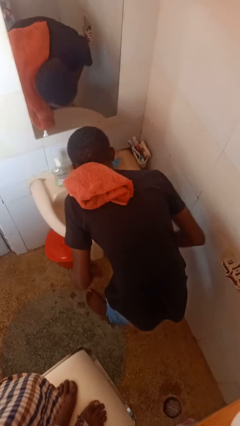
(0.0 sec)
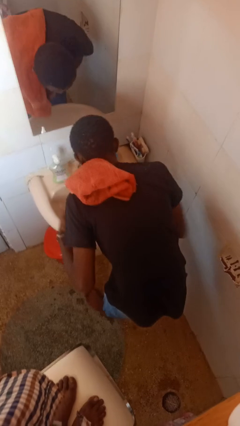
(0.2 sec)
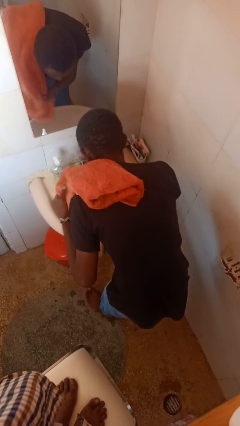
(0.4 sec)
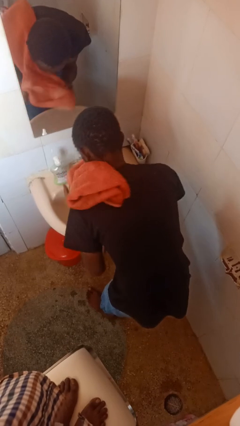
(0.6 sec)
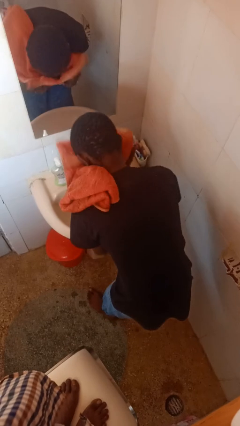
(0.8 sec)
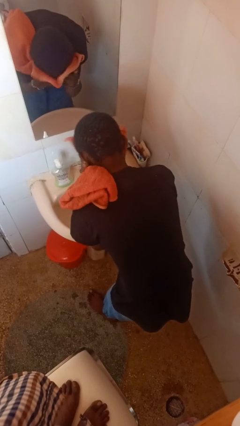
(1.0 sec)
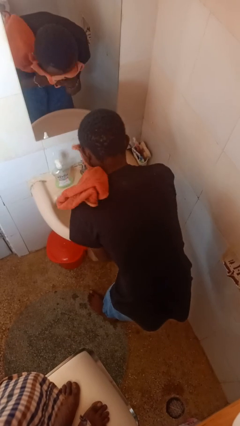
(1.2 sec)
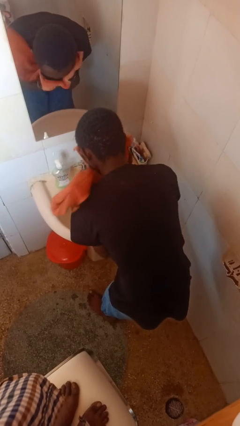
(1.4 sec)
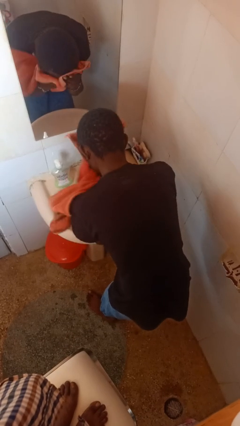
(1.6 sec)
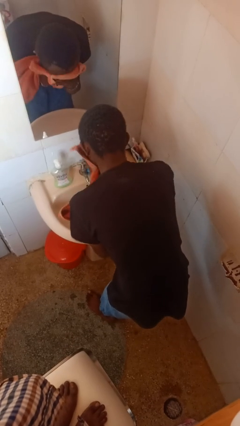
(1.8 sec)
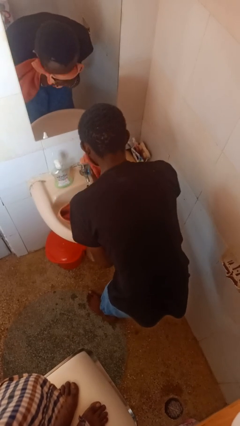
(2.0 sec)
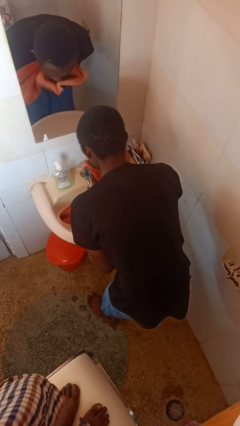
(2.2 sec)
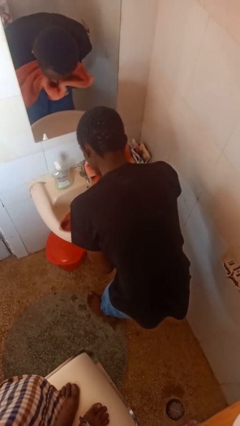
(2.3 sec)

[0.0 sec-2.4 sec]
person dries face with towel

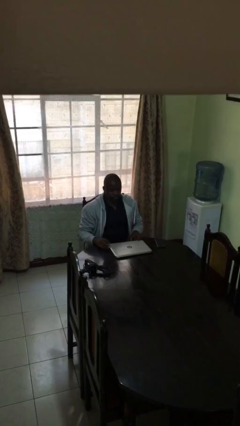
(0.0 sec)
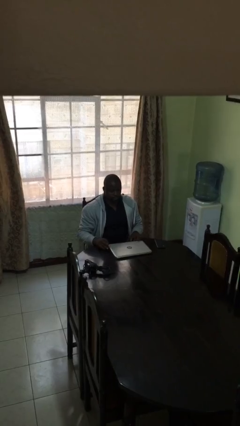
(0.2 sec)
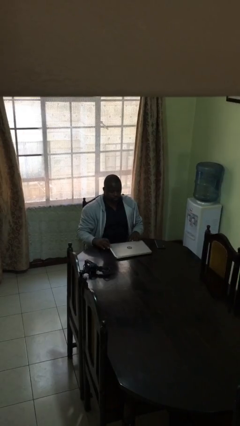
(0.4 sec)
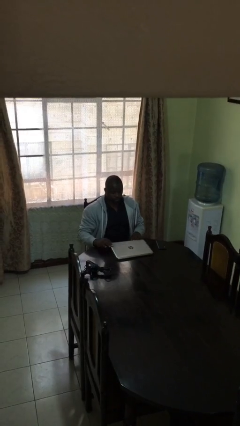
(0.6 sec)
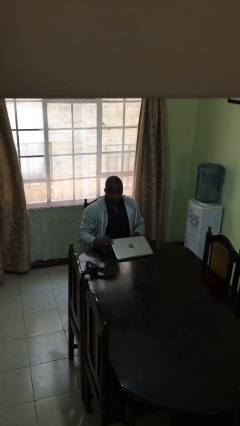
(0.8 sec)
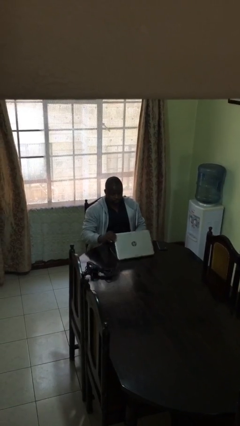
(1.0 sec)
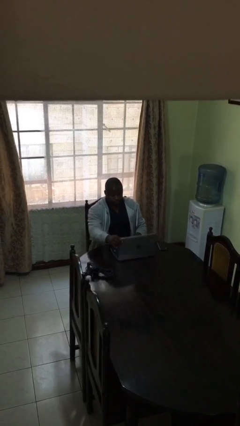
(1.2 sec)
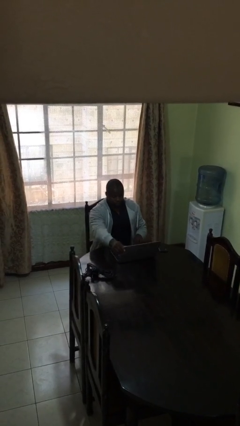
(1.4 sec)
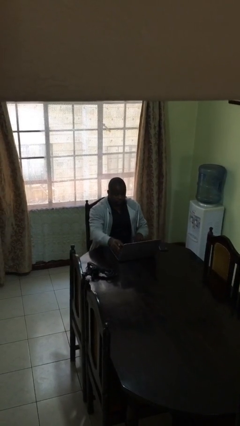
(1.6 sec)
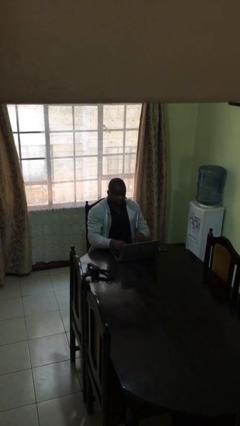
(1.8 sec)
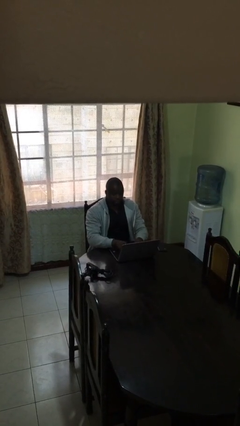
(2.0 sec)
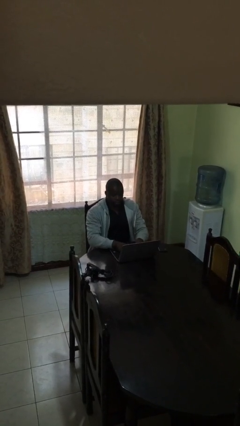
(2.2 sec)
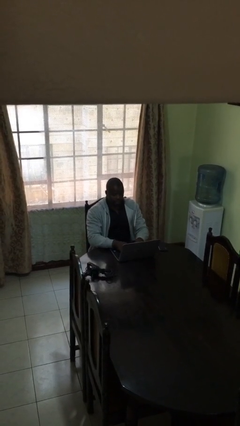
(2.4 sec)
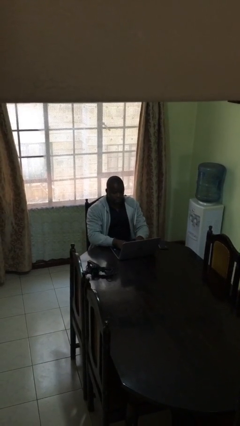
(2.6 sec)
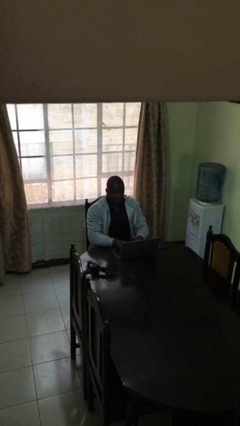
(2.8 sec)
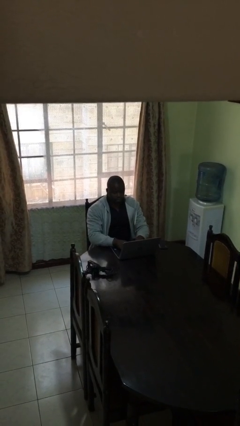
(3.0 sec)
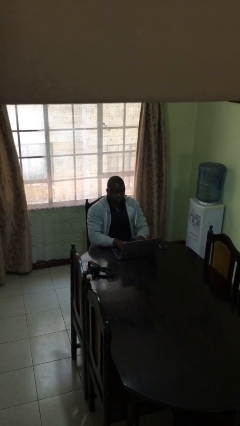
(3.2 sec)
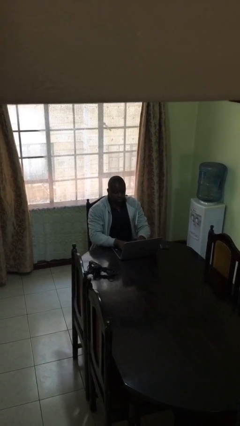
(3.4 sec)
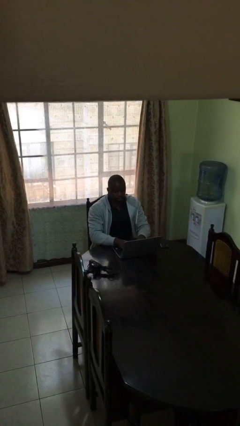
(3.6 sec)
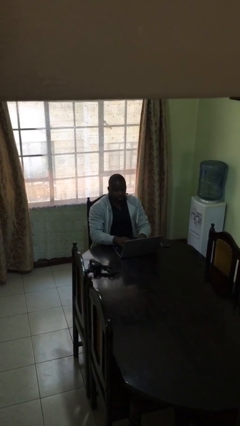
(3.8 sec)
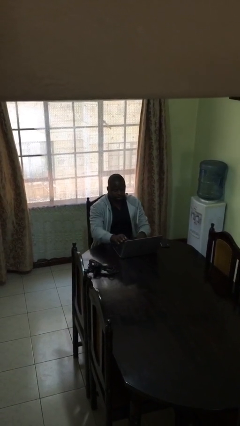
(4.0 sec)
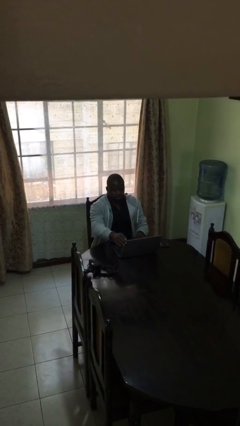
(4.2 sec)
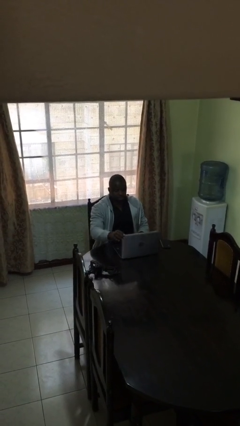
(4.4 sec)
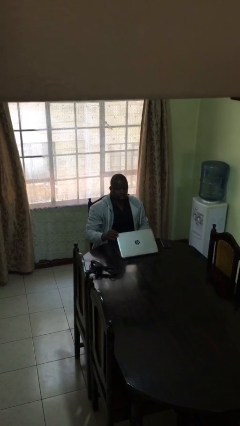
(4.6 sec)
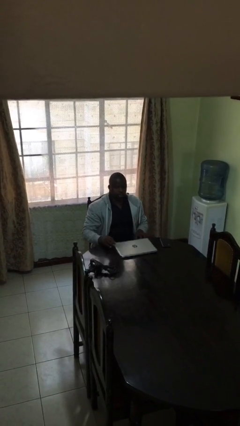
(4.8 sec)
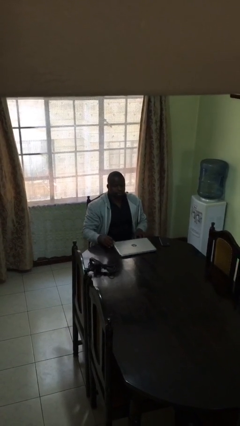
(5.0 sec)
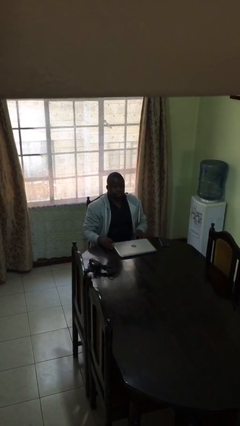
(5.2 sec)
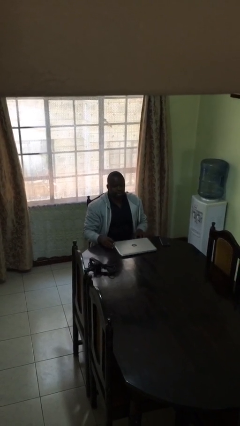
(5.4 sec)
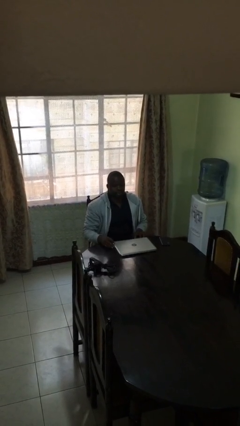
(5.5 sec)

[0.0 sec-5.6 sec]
person interacts with laptop

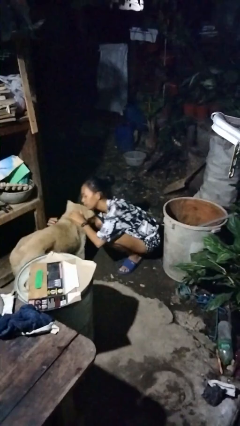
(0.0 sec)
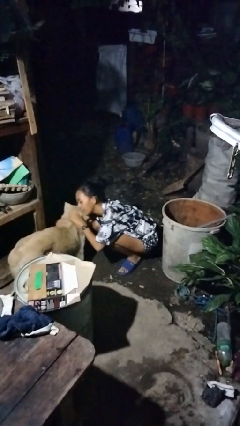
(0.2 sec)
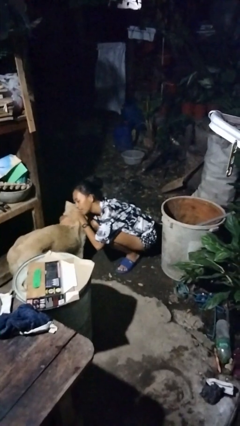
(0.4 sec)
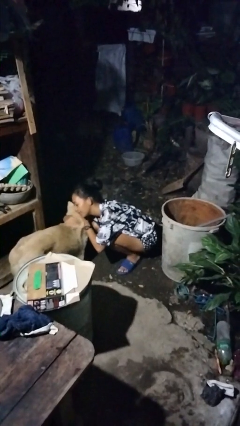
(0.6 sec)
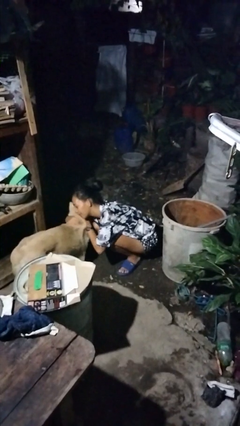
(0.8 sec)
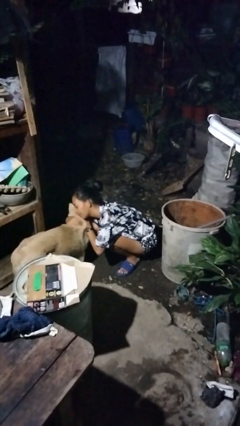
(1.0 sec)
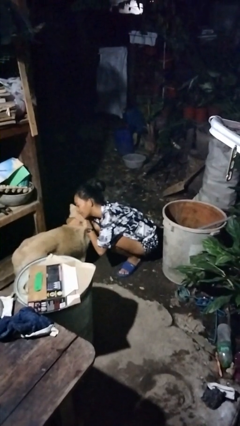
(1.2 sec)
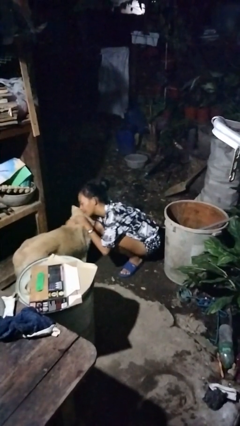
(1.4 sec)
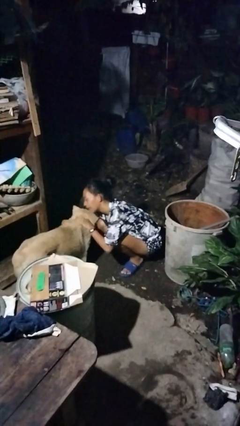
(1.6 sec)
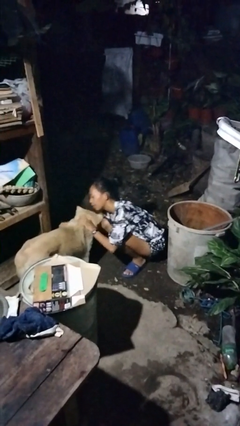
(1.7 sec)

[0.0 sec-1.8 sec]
person hugs dog

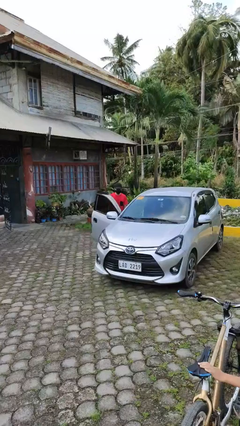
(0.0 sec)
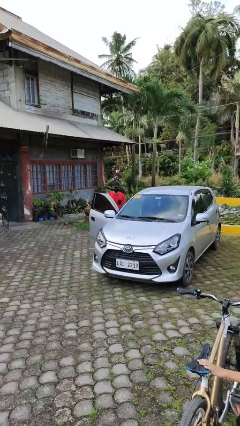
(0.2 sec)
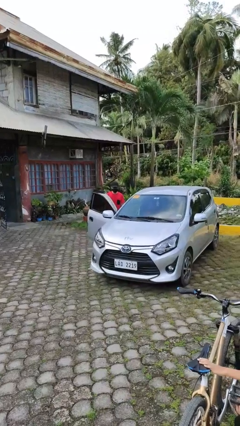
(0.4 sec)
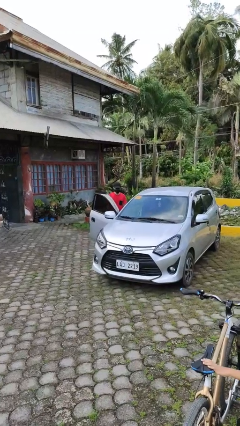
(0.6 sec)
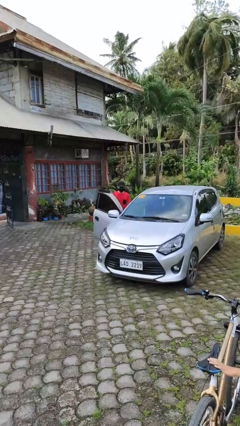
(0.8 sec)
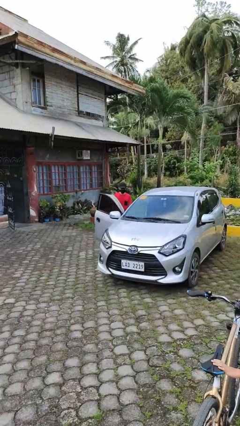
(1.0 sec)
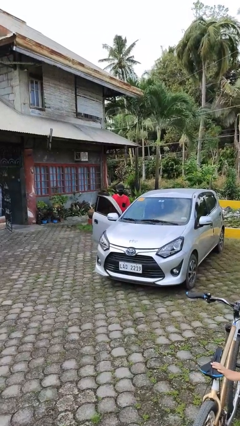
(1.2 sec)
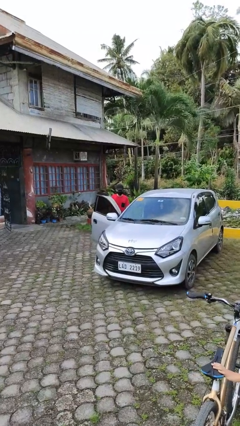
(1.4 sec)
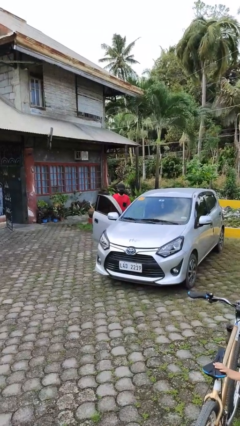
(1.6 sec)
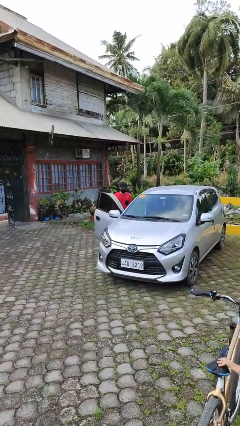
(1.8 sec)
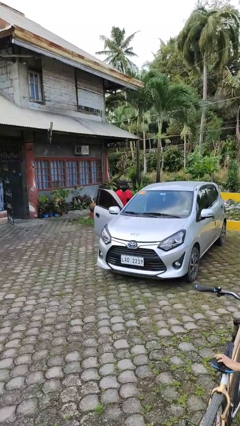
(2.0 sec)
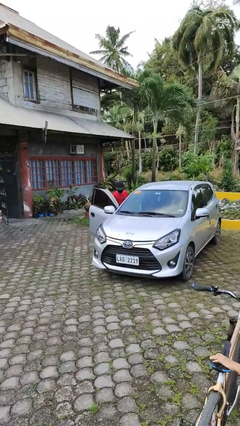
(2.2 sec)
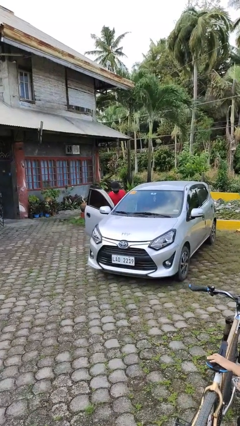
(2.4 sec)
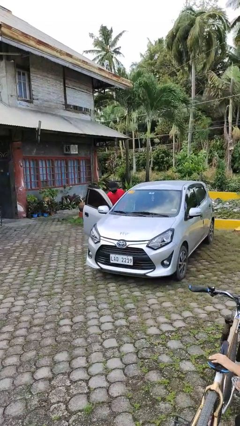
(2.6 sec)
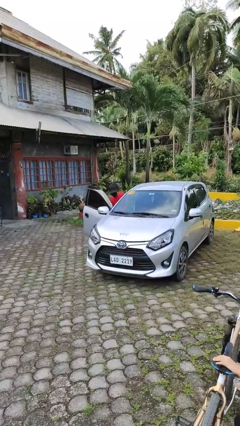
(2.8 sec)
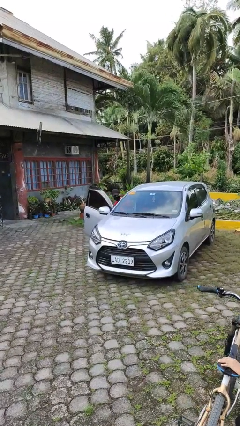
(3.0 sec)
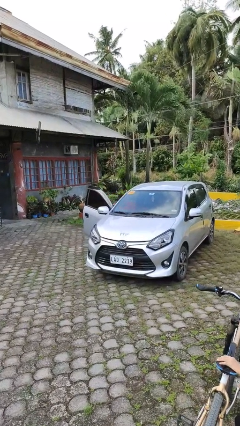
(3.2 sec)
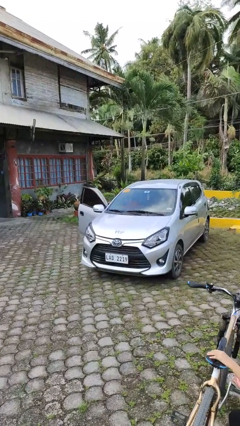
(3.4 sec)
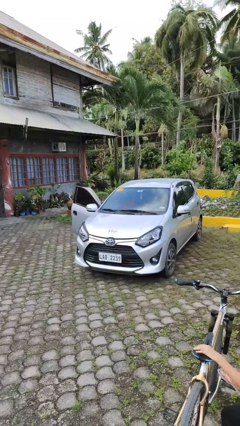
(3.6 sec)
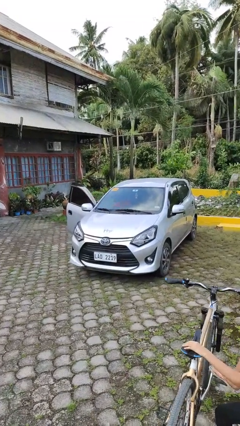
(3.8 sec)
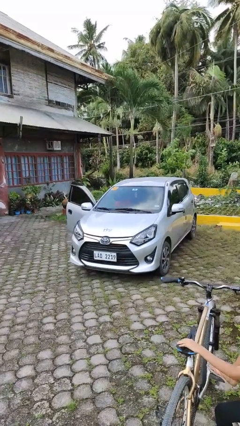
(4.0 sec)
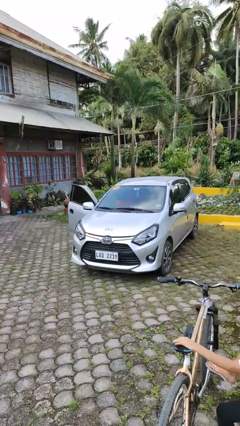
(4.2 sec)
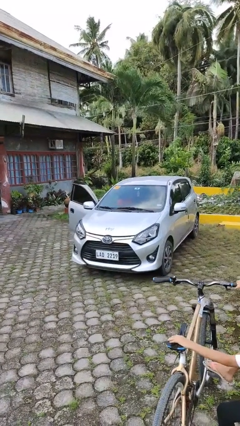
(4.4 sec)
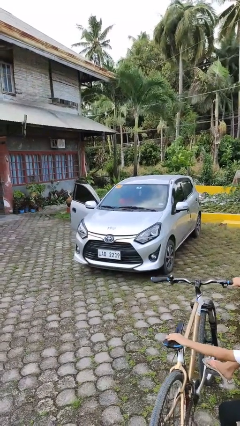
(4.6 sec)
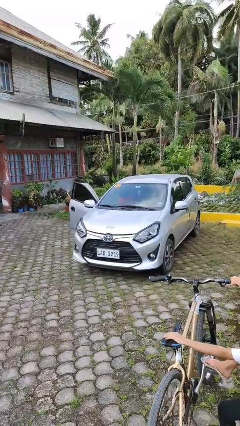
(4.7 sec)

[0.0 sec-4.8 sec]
person enters car

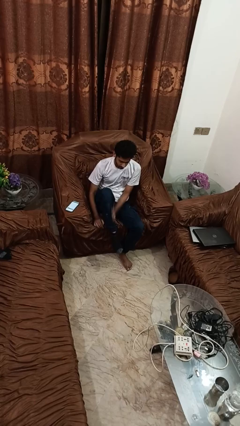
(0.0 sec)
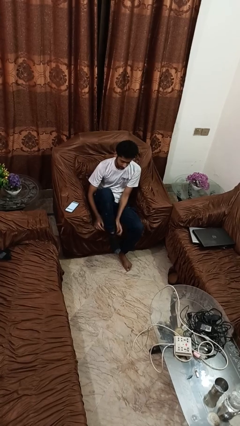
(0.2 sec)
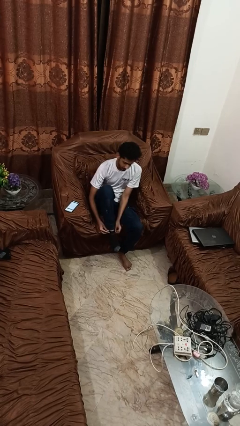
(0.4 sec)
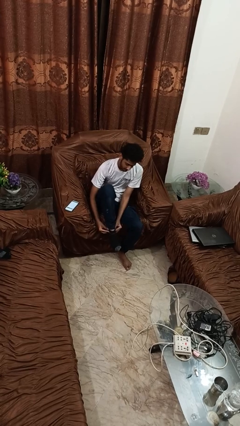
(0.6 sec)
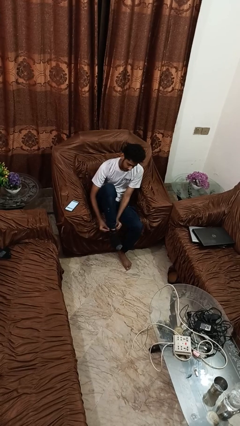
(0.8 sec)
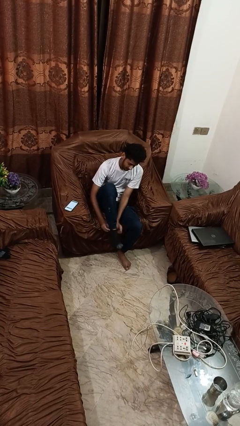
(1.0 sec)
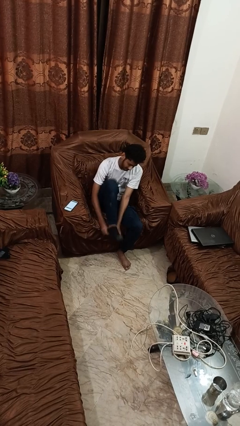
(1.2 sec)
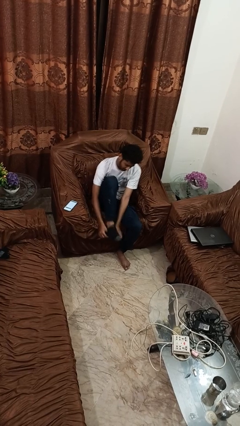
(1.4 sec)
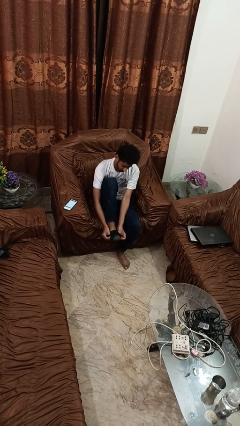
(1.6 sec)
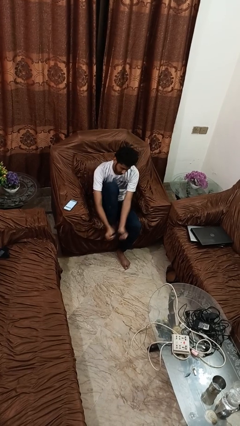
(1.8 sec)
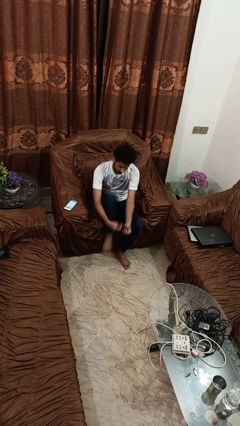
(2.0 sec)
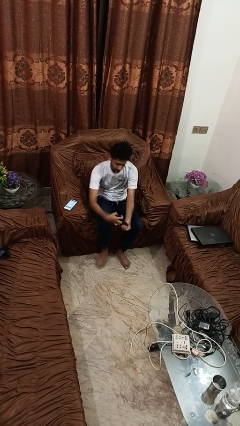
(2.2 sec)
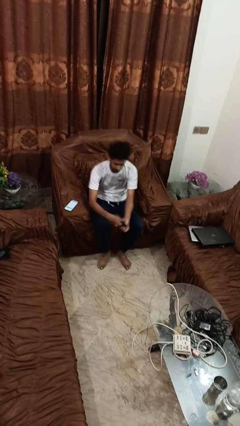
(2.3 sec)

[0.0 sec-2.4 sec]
person takes off socks
